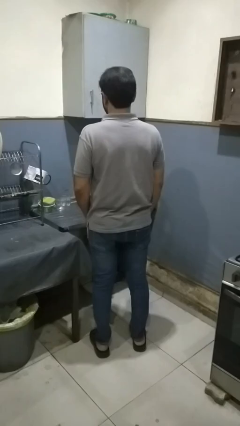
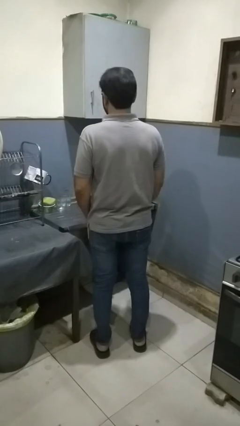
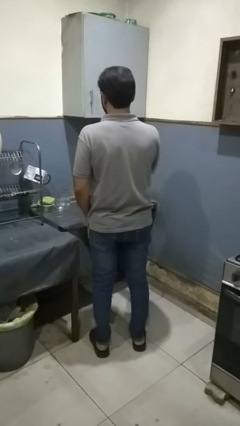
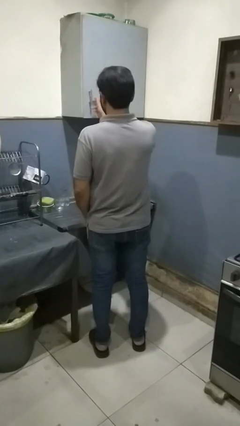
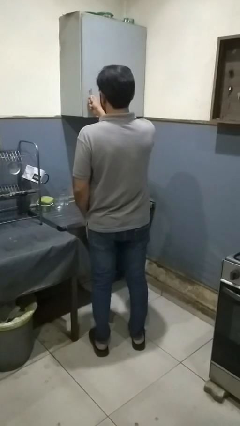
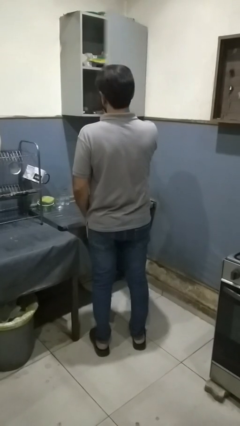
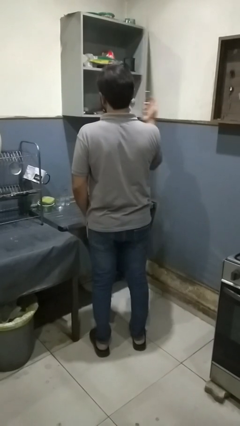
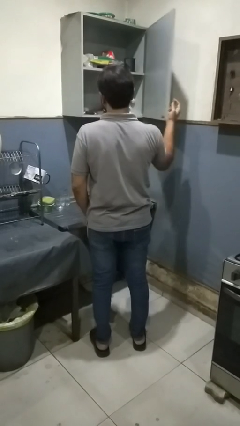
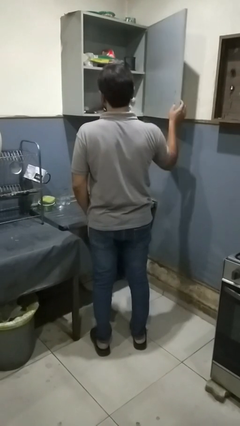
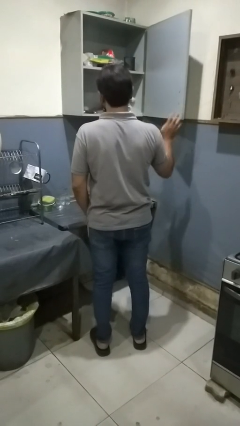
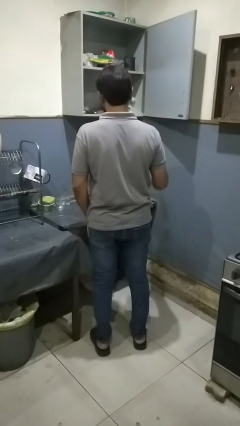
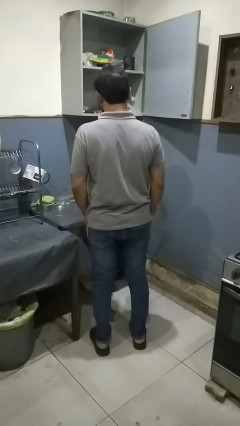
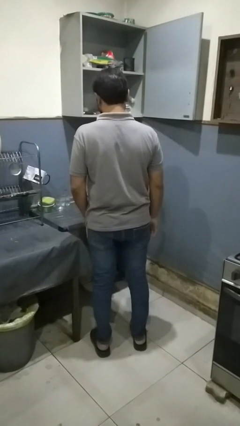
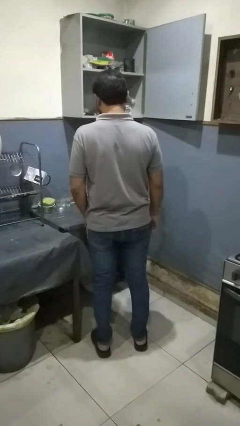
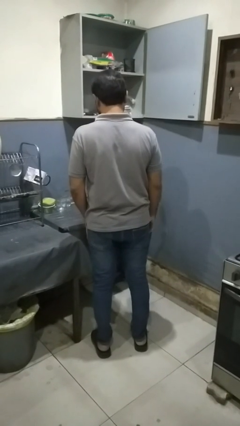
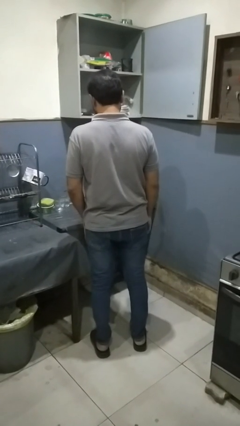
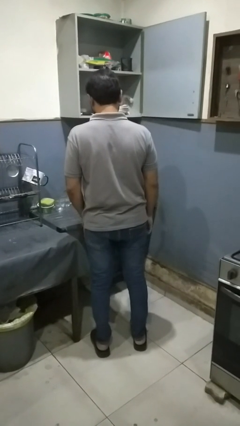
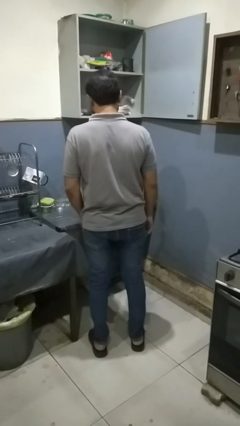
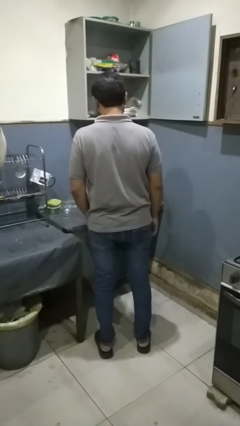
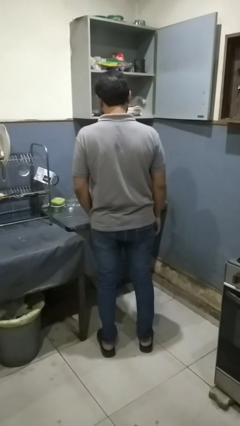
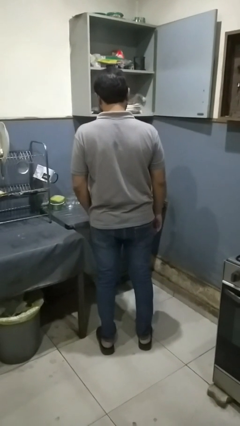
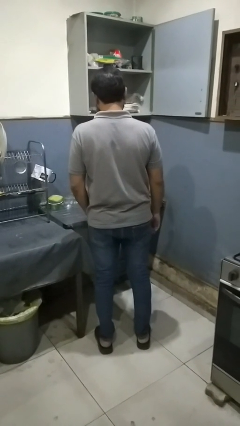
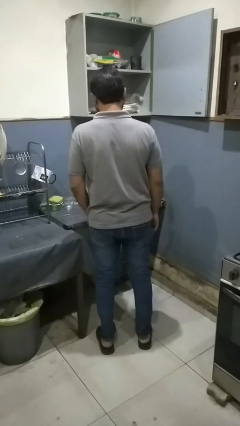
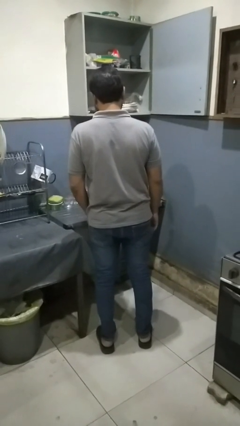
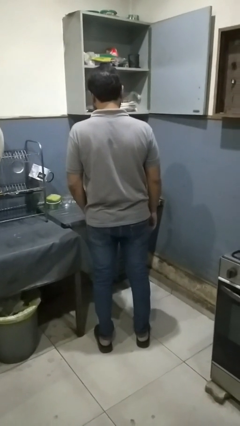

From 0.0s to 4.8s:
person opens kitchen drawer

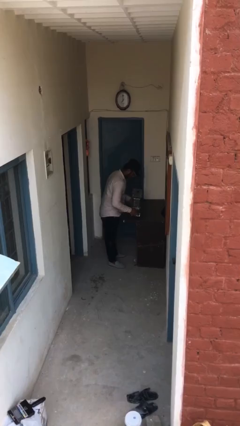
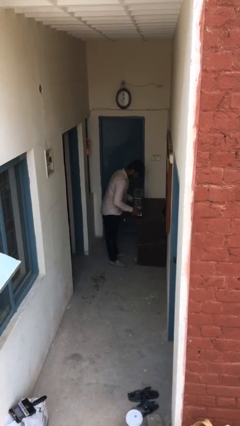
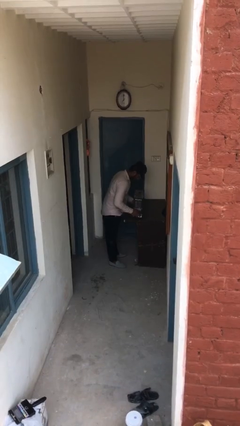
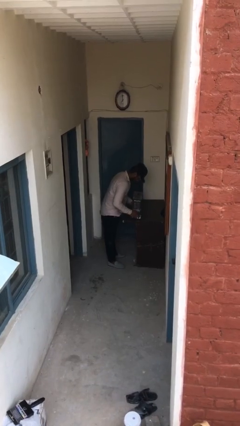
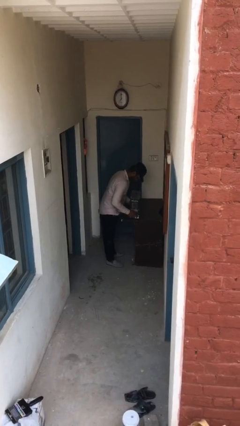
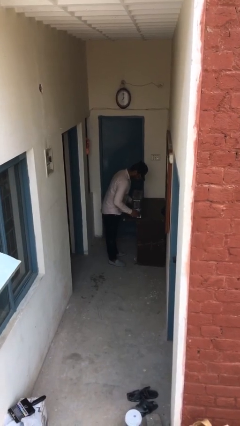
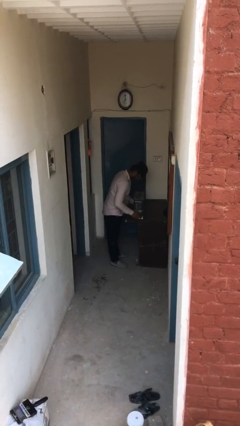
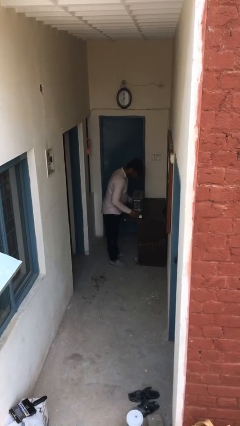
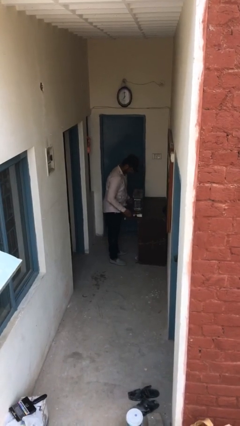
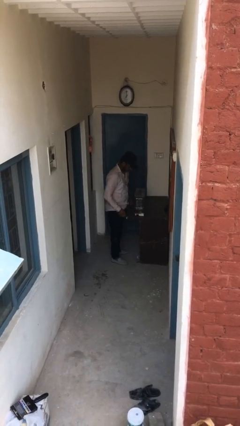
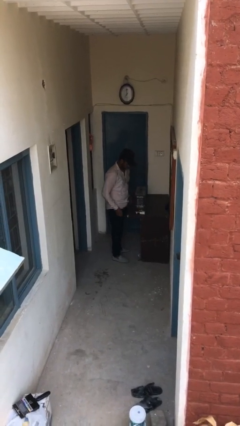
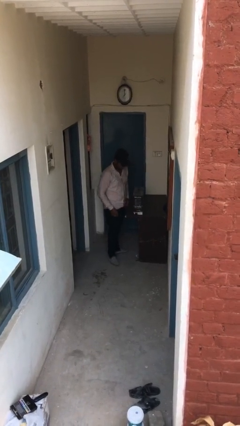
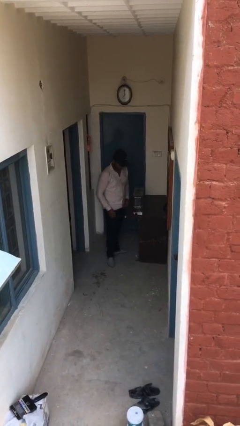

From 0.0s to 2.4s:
person puts down object on table

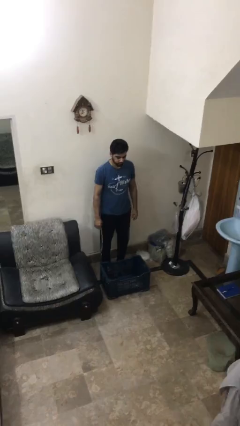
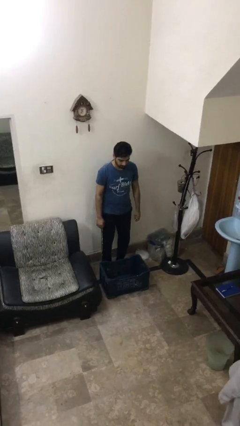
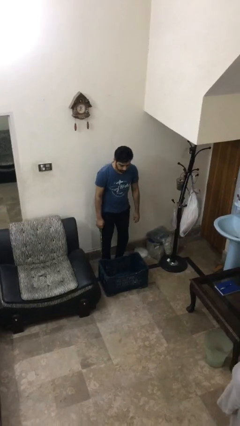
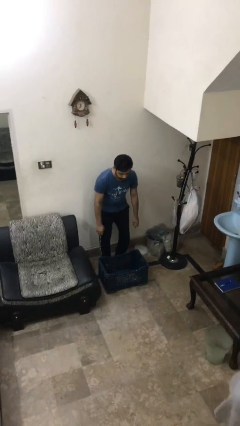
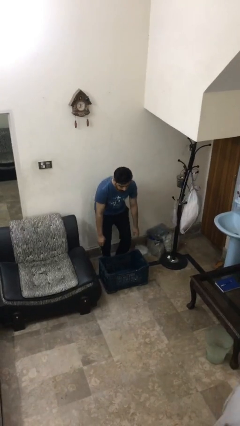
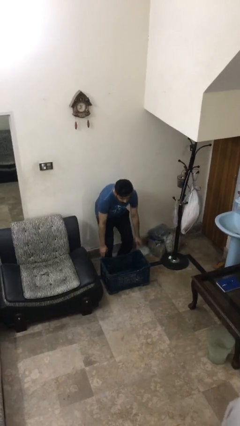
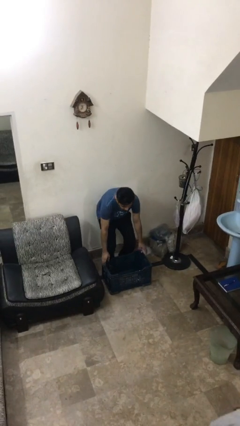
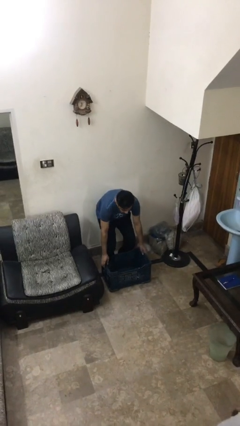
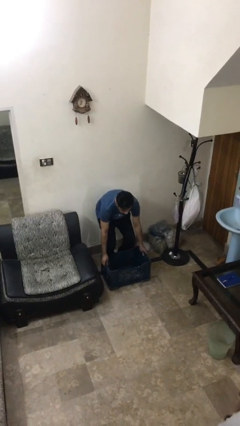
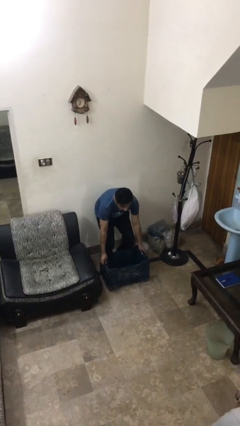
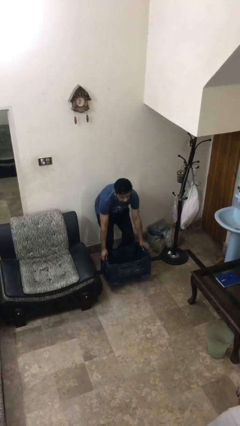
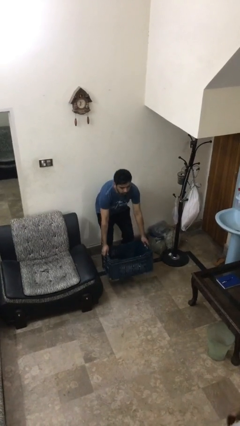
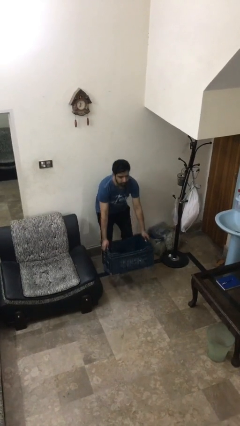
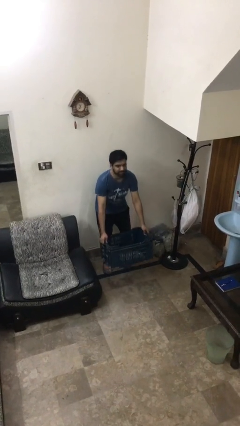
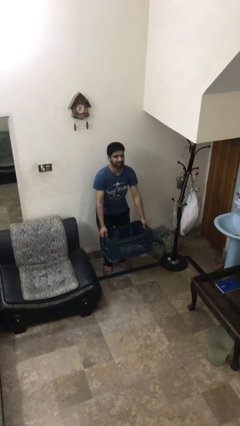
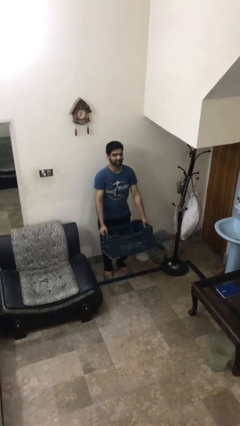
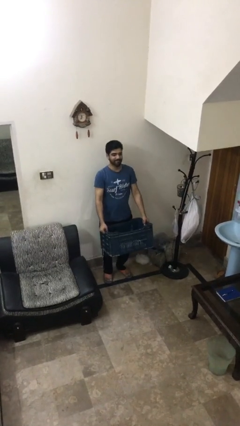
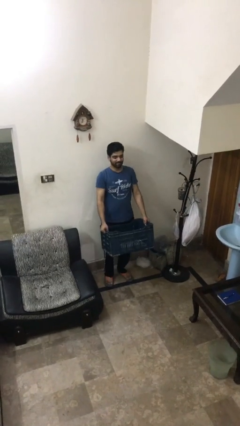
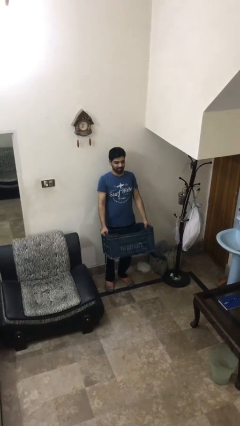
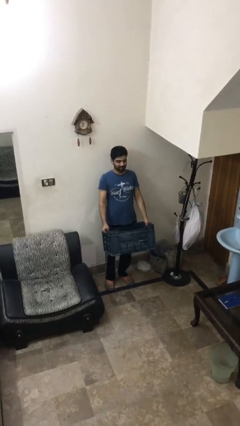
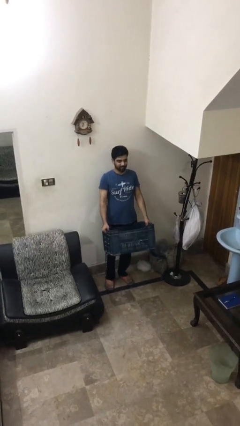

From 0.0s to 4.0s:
person picks up object from floor

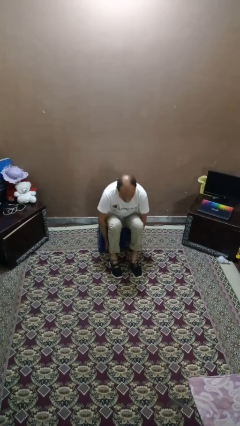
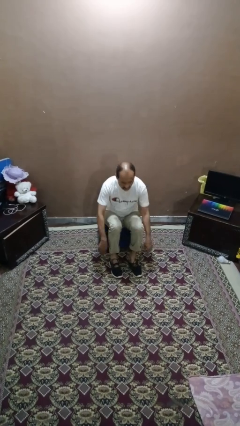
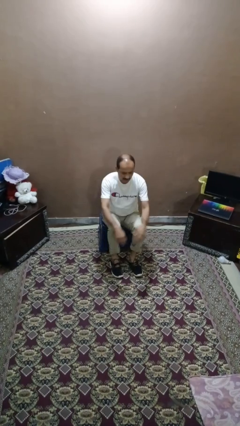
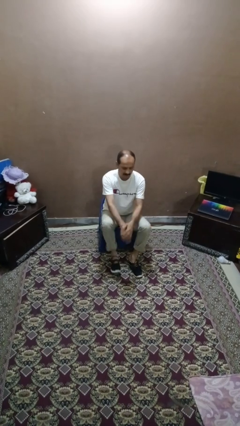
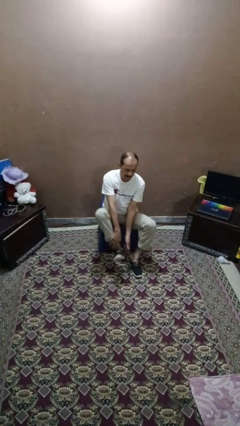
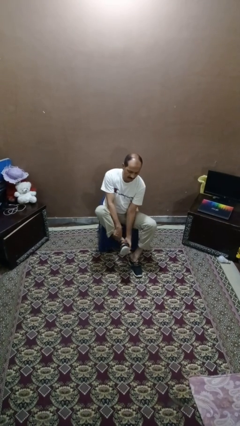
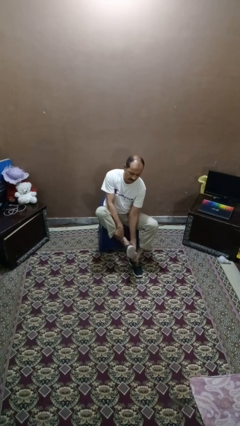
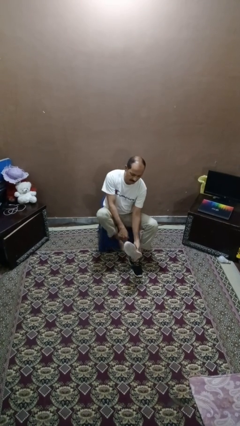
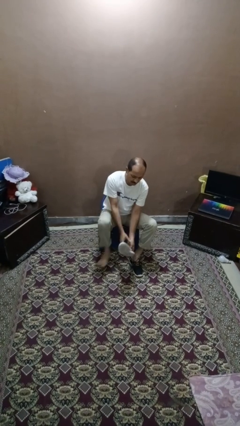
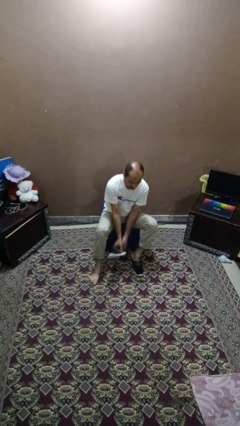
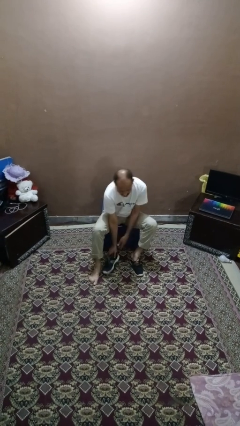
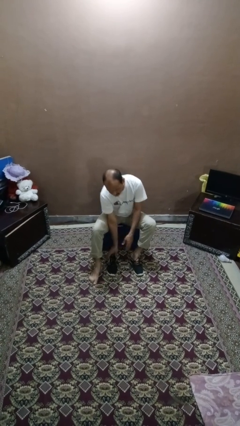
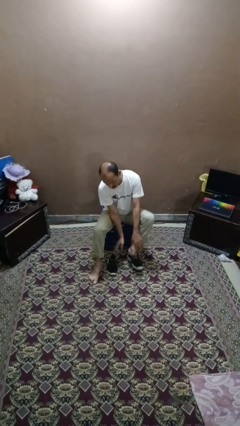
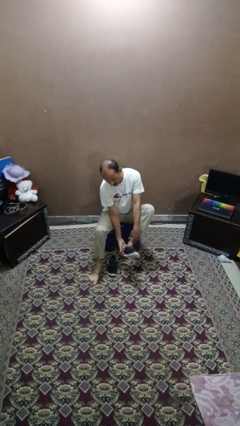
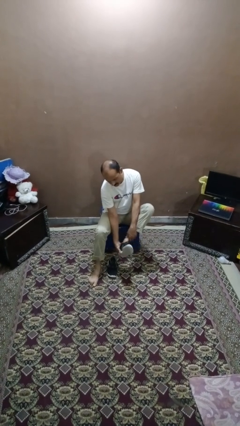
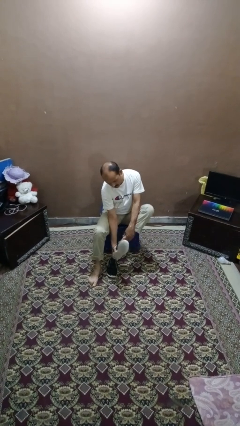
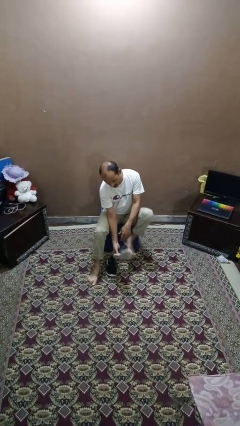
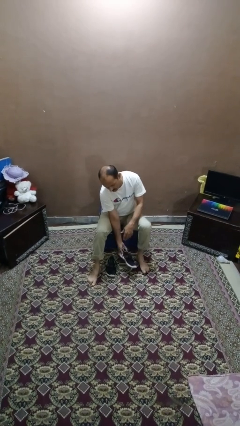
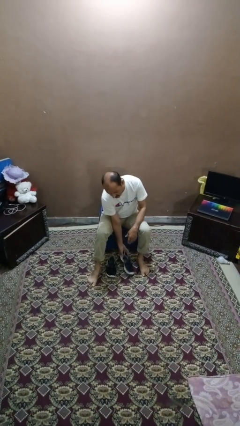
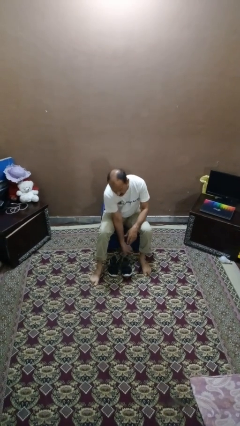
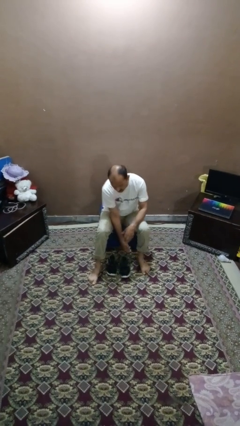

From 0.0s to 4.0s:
person takes off shoes

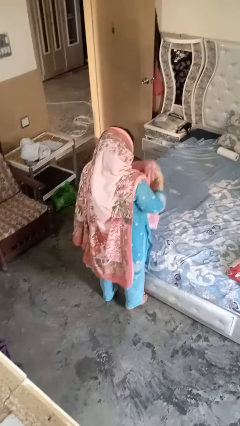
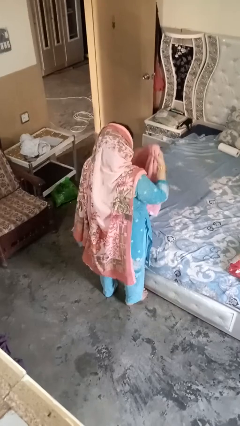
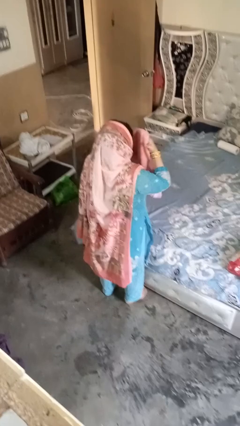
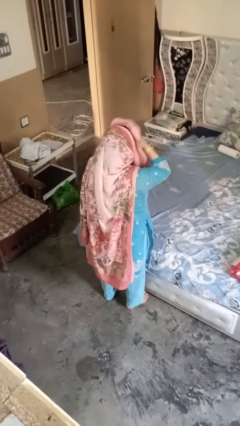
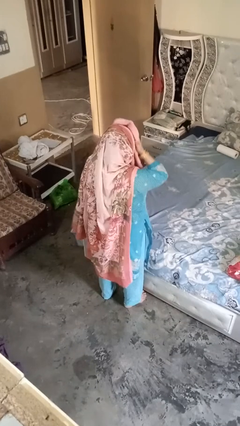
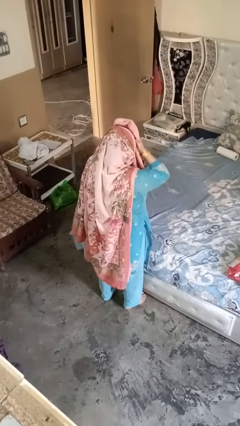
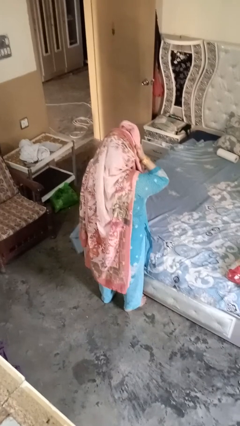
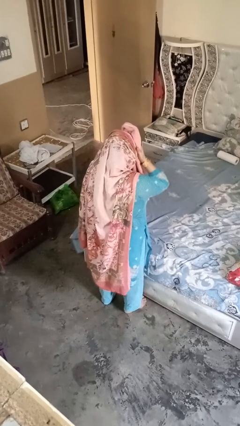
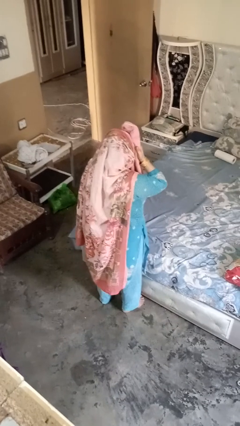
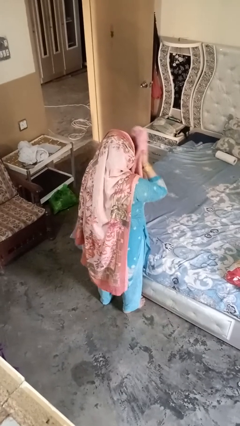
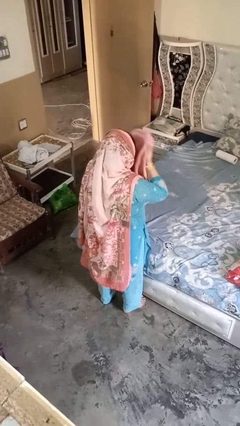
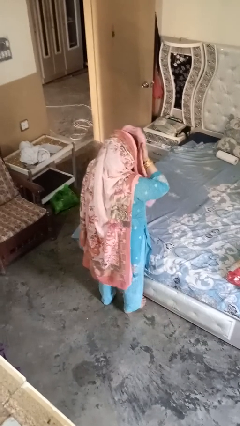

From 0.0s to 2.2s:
person dries hair with towel
